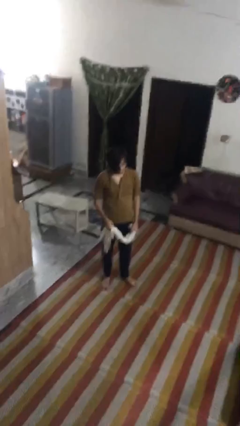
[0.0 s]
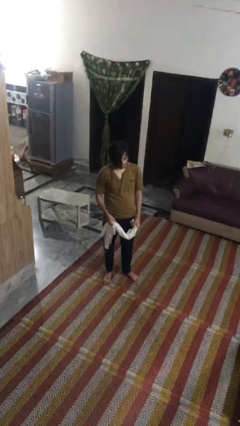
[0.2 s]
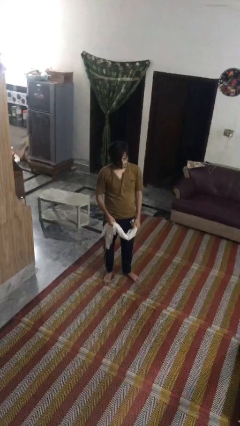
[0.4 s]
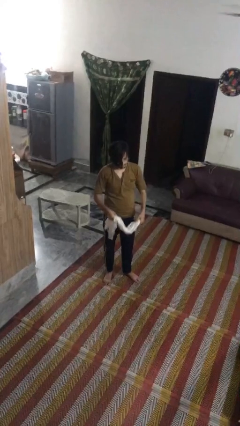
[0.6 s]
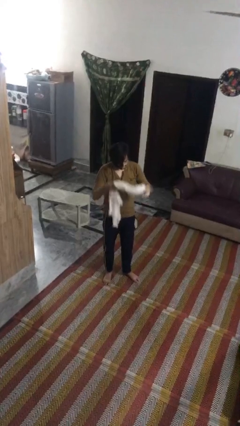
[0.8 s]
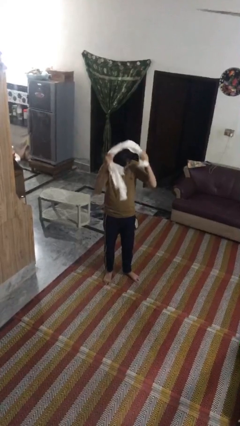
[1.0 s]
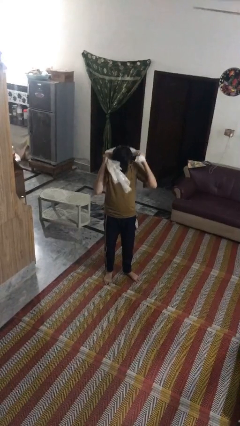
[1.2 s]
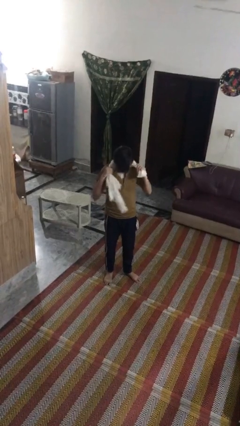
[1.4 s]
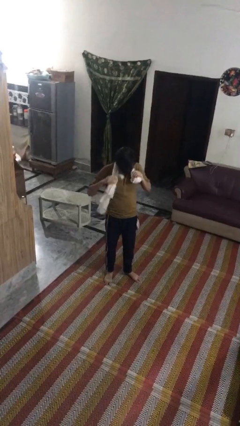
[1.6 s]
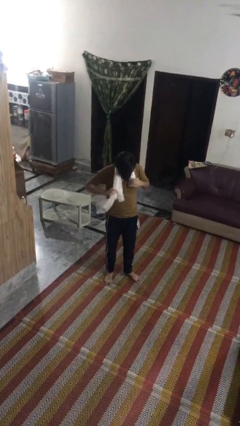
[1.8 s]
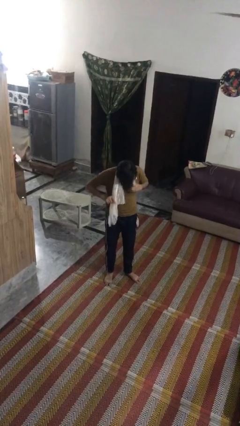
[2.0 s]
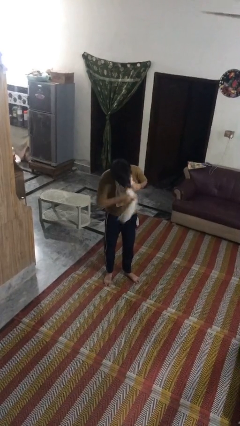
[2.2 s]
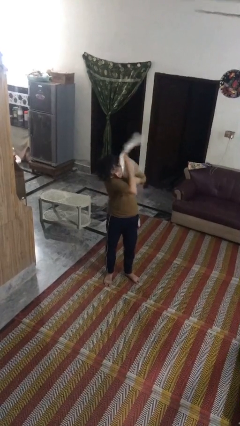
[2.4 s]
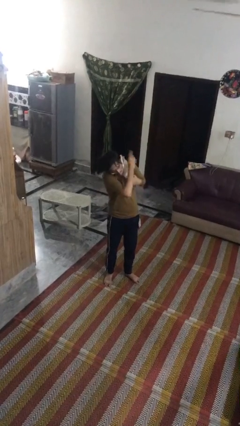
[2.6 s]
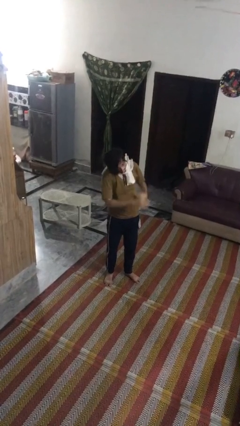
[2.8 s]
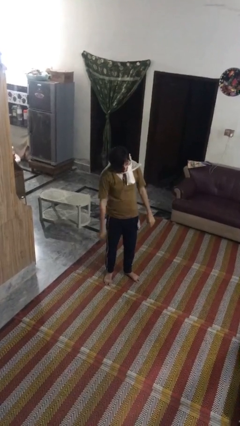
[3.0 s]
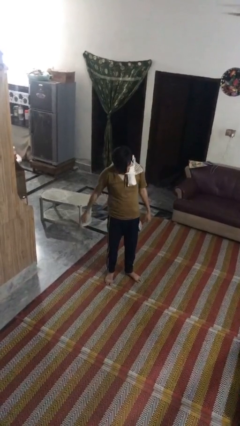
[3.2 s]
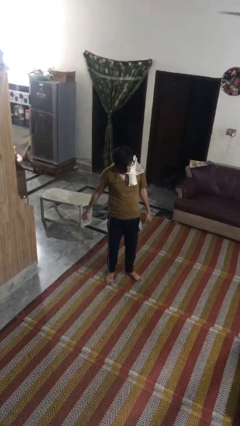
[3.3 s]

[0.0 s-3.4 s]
person puts on scarf

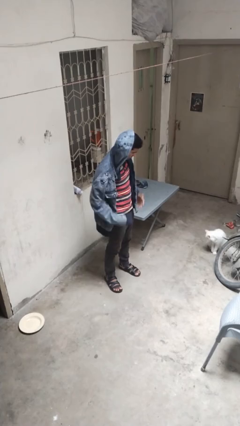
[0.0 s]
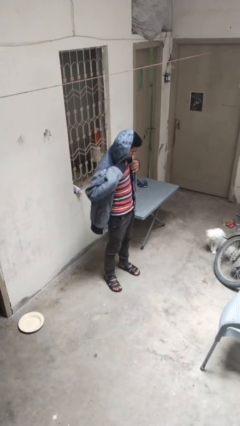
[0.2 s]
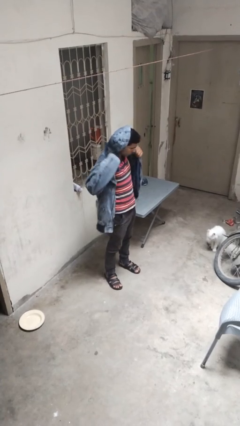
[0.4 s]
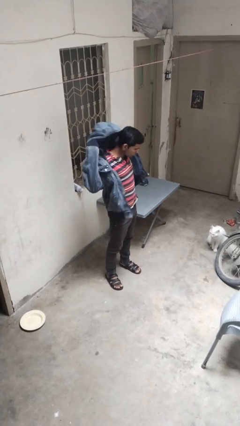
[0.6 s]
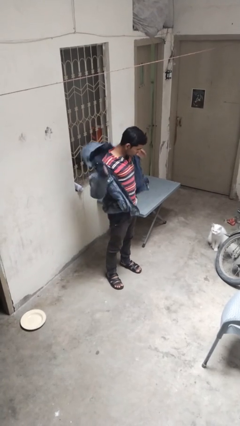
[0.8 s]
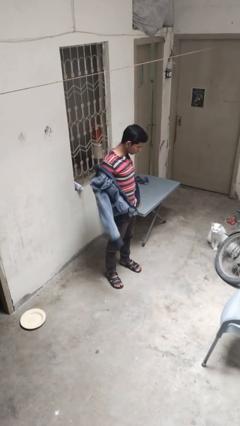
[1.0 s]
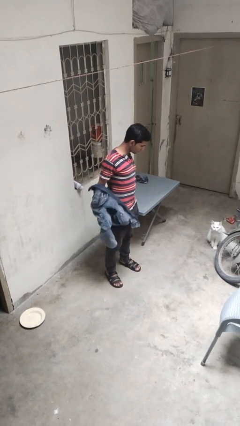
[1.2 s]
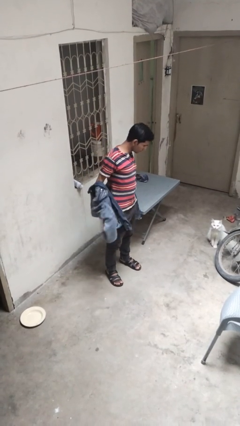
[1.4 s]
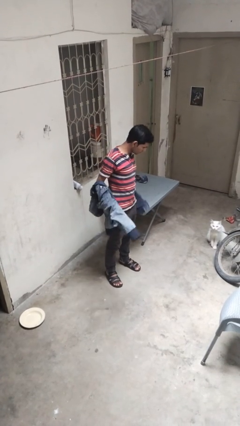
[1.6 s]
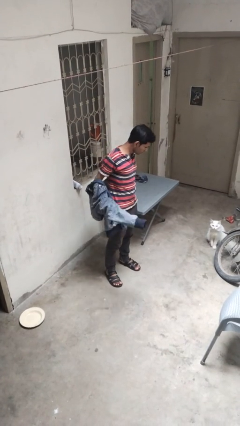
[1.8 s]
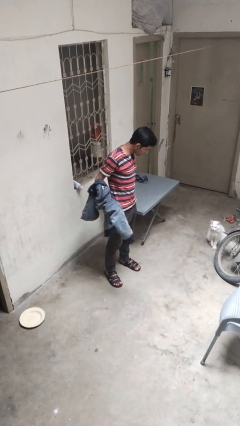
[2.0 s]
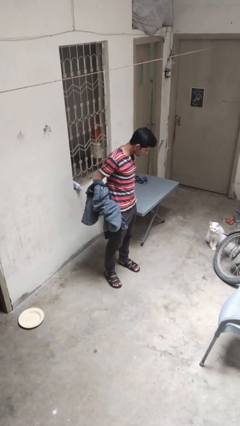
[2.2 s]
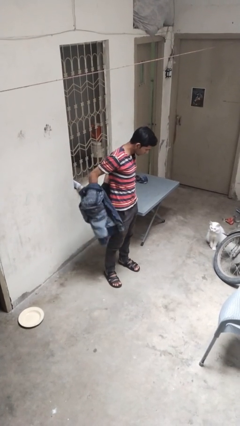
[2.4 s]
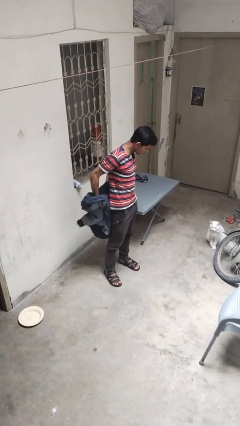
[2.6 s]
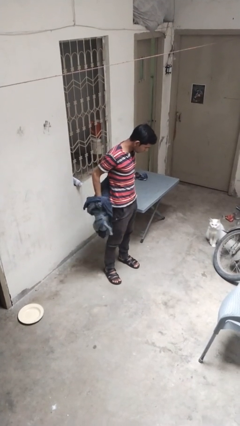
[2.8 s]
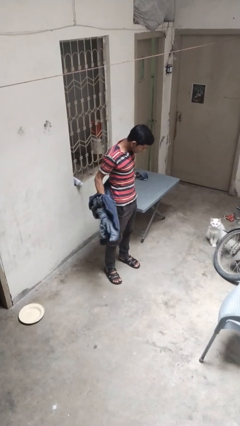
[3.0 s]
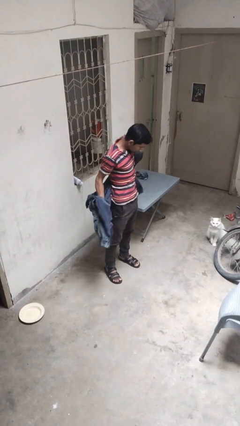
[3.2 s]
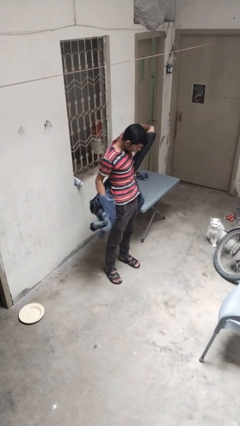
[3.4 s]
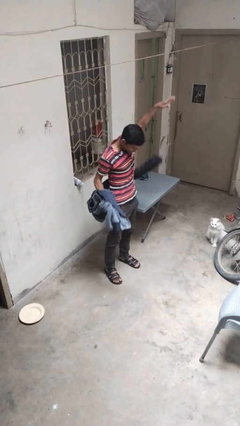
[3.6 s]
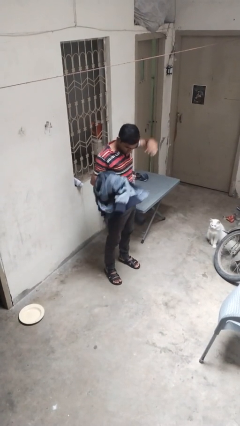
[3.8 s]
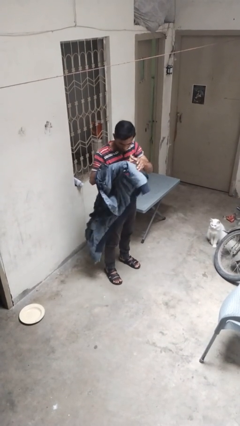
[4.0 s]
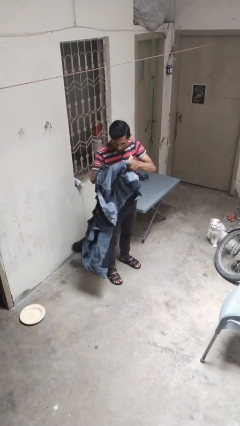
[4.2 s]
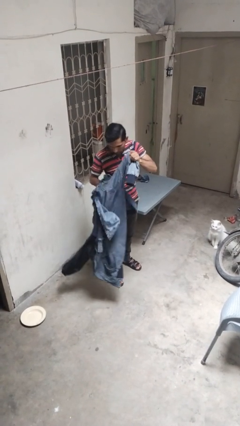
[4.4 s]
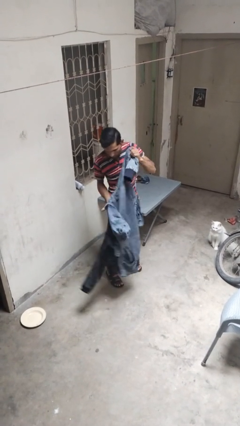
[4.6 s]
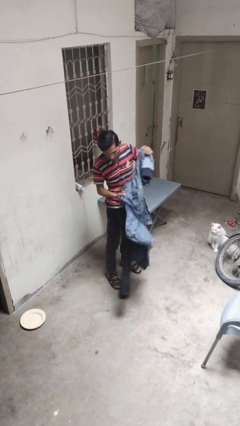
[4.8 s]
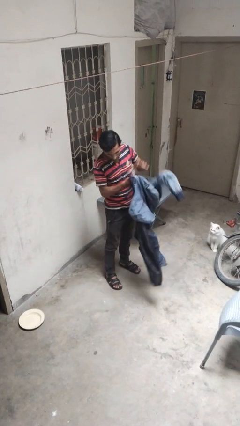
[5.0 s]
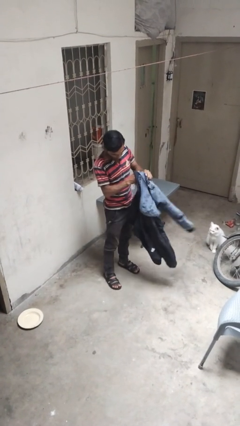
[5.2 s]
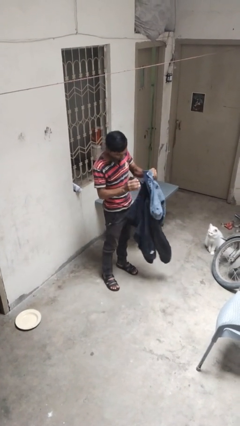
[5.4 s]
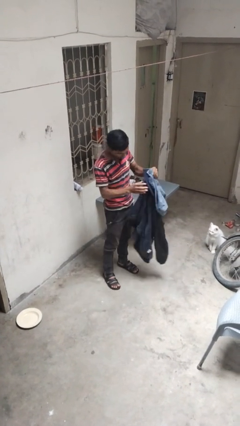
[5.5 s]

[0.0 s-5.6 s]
person takes off hoodie

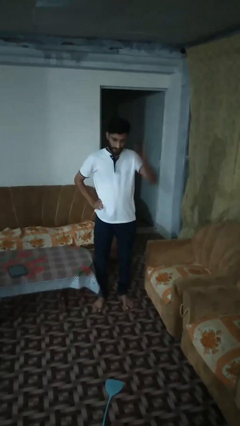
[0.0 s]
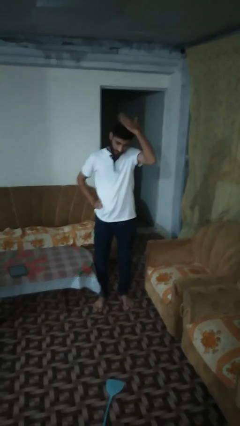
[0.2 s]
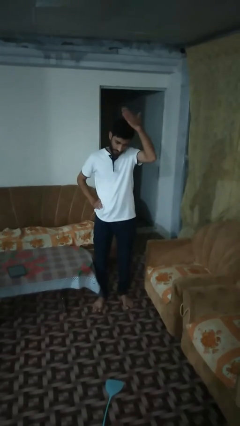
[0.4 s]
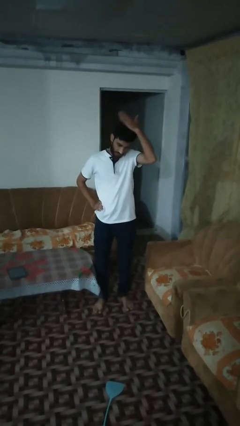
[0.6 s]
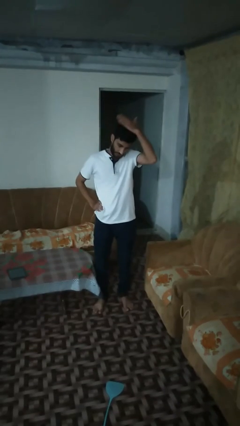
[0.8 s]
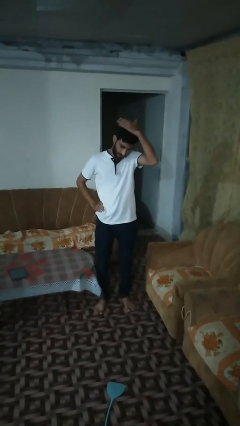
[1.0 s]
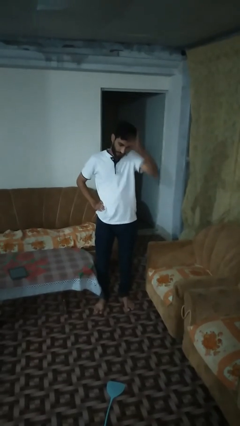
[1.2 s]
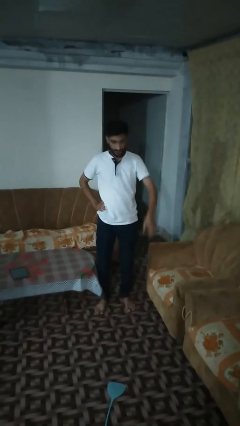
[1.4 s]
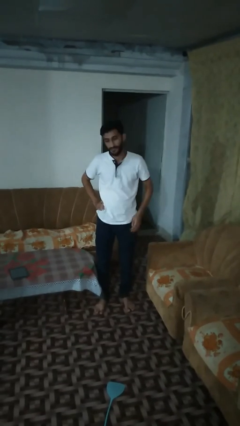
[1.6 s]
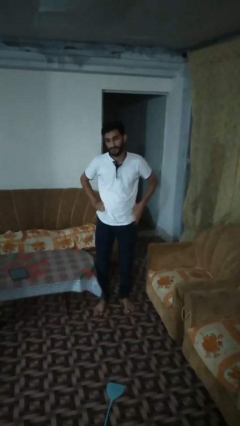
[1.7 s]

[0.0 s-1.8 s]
person pats head

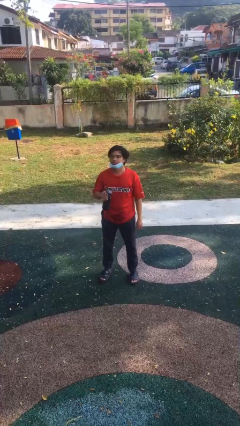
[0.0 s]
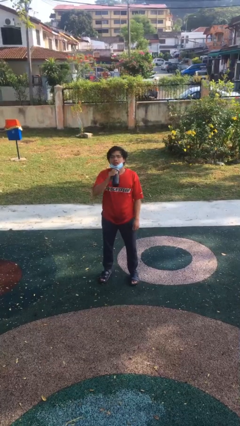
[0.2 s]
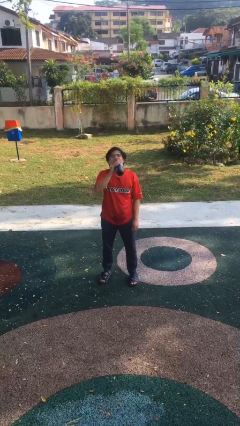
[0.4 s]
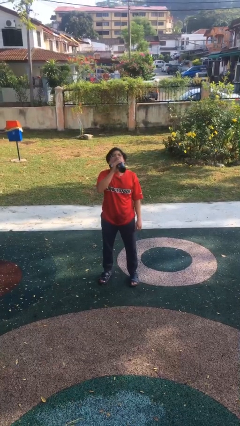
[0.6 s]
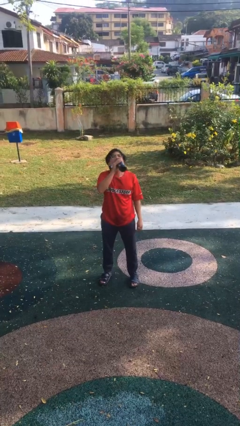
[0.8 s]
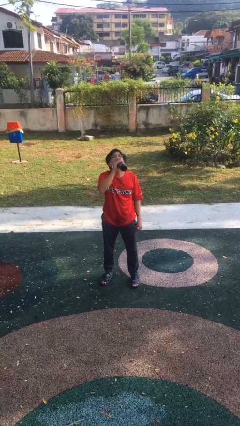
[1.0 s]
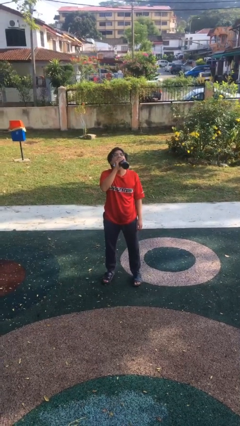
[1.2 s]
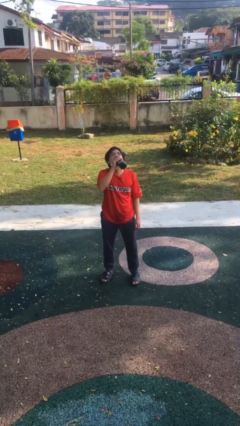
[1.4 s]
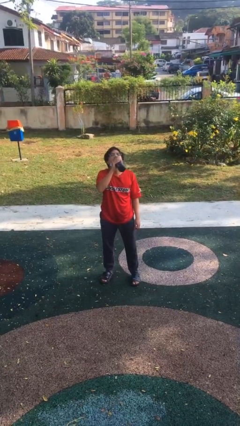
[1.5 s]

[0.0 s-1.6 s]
person drinks from bottle

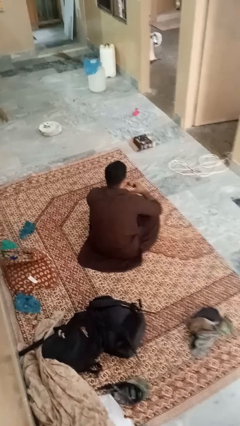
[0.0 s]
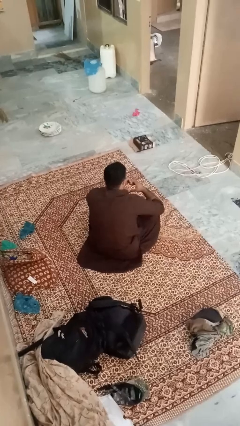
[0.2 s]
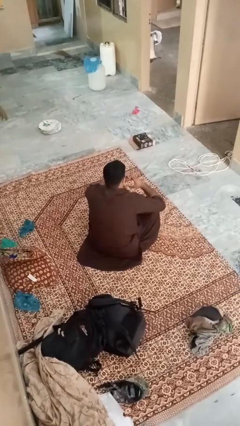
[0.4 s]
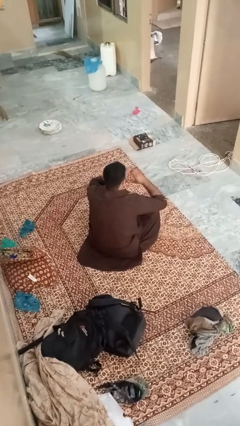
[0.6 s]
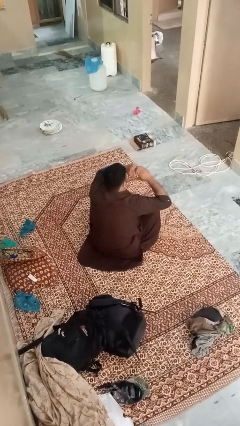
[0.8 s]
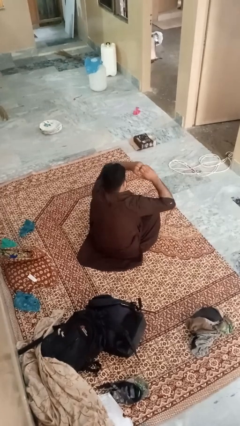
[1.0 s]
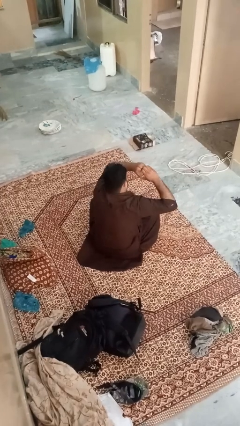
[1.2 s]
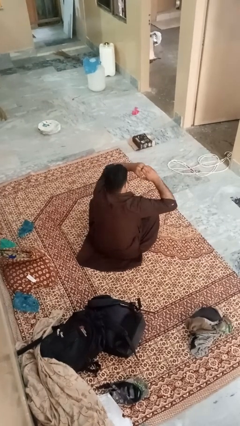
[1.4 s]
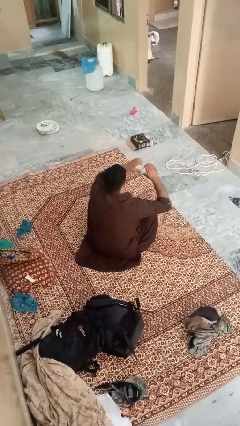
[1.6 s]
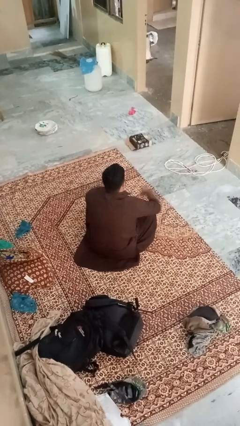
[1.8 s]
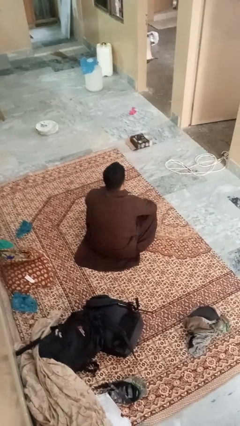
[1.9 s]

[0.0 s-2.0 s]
person gestures heart

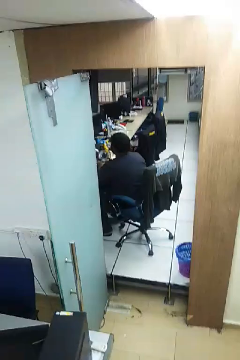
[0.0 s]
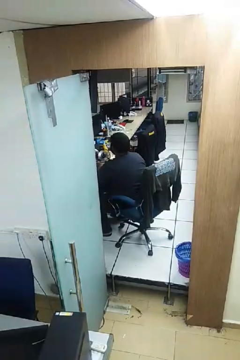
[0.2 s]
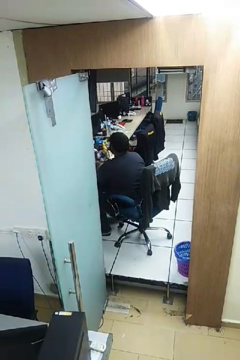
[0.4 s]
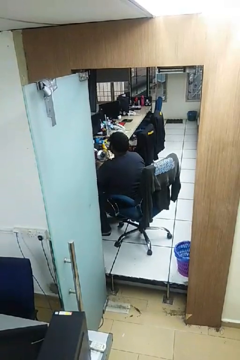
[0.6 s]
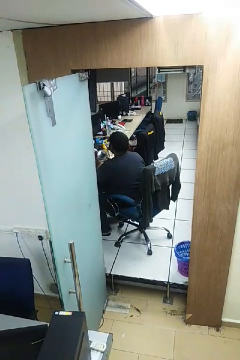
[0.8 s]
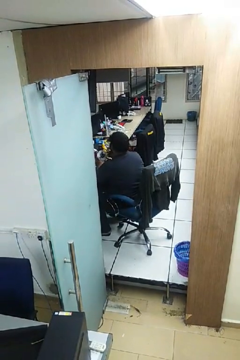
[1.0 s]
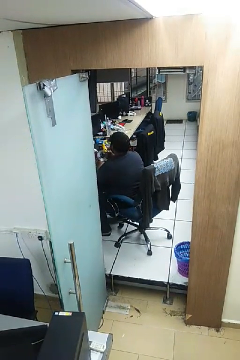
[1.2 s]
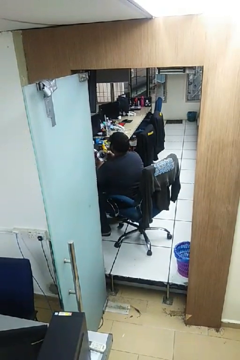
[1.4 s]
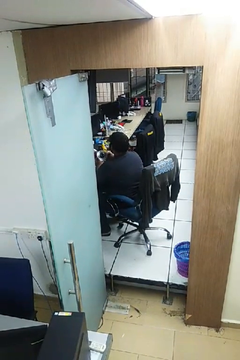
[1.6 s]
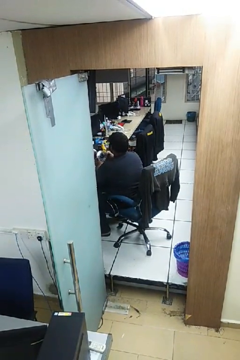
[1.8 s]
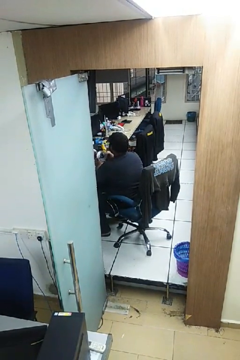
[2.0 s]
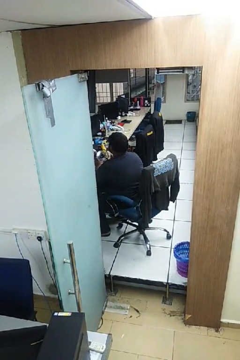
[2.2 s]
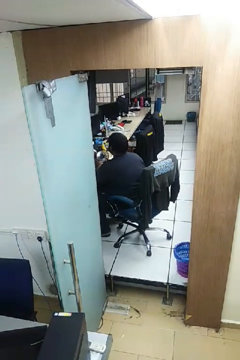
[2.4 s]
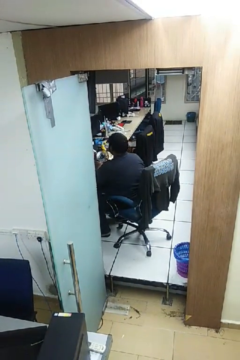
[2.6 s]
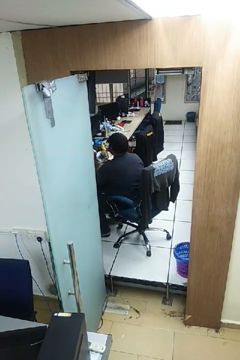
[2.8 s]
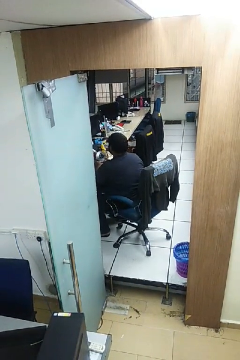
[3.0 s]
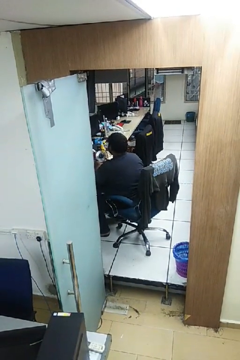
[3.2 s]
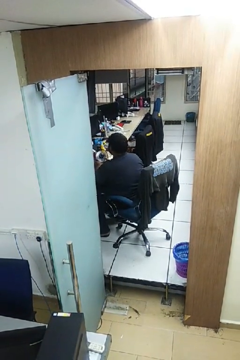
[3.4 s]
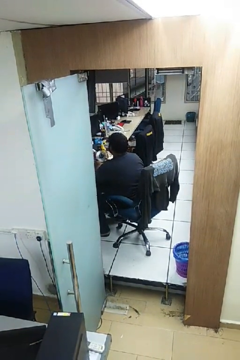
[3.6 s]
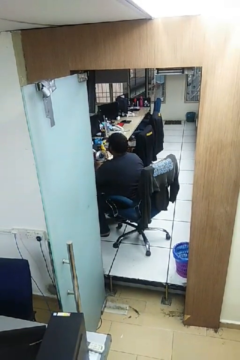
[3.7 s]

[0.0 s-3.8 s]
person turns on fan
